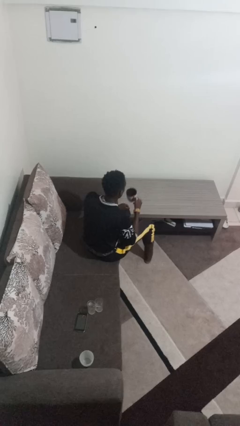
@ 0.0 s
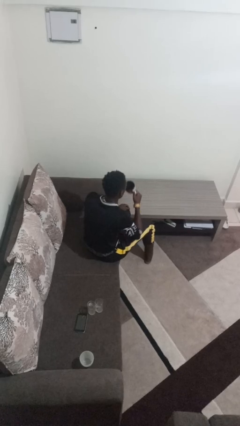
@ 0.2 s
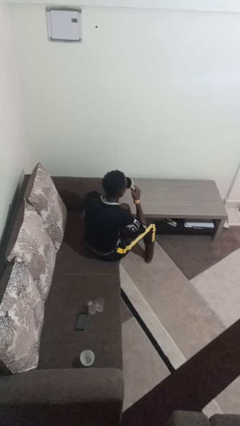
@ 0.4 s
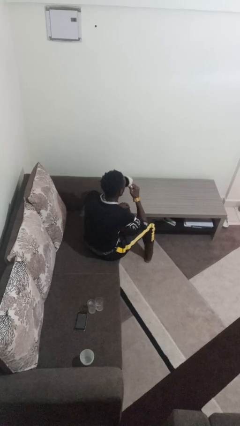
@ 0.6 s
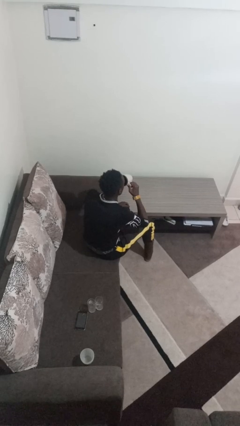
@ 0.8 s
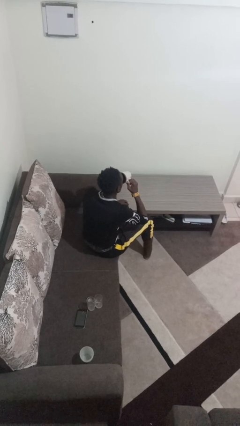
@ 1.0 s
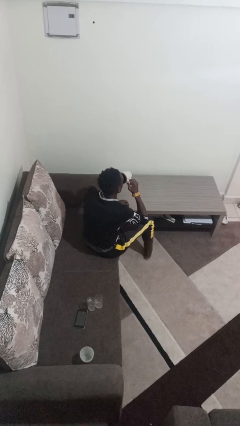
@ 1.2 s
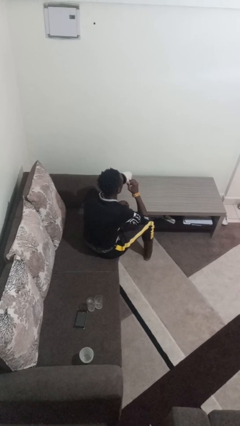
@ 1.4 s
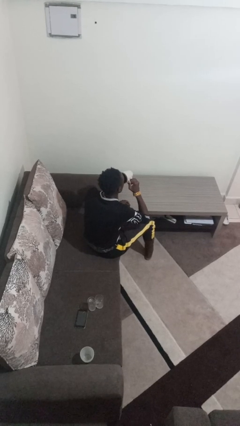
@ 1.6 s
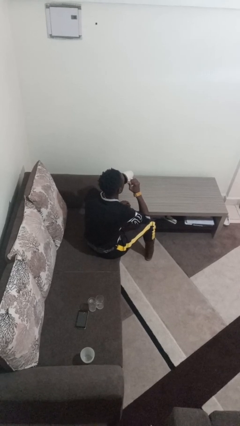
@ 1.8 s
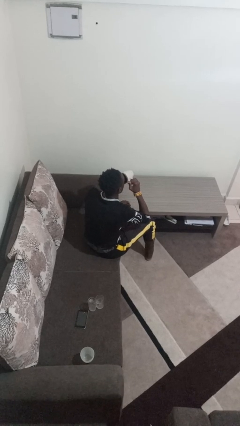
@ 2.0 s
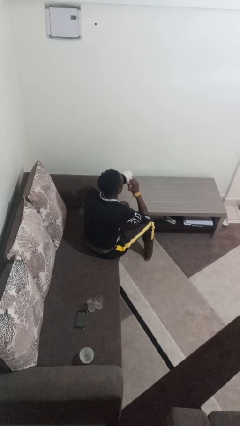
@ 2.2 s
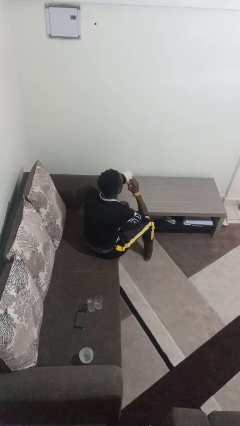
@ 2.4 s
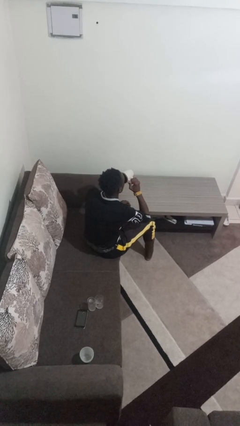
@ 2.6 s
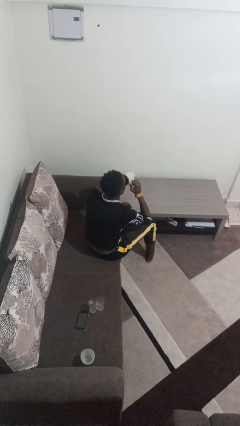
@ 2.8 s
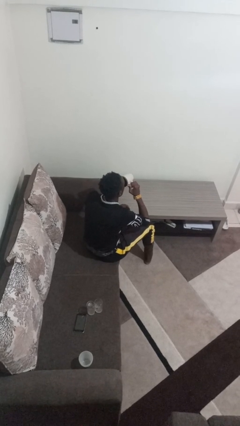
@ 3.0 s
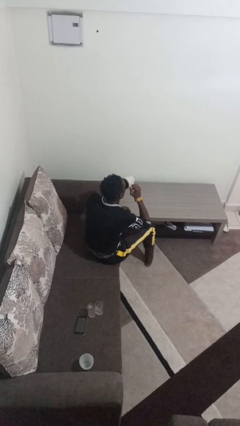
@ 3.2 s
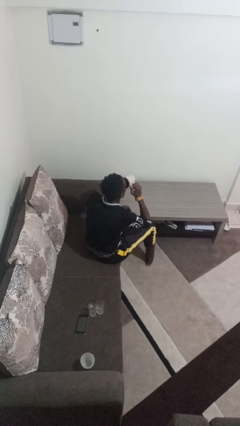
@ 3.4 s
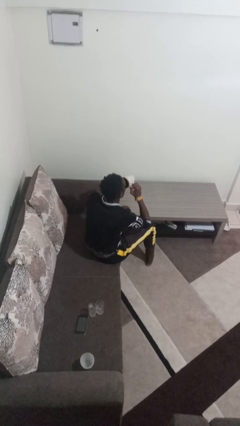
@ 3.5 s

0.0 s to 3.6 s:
person drinks from mug

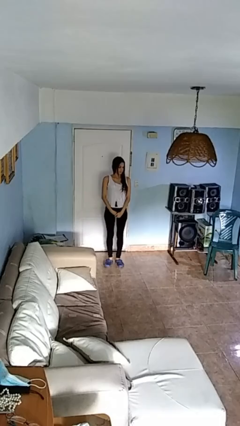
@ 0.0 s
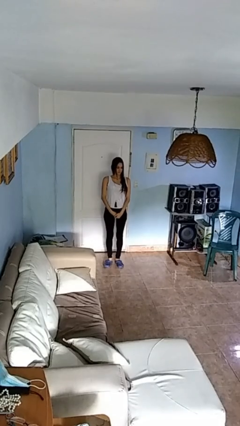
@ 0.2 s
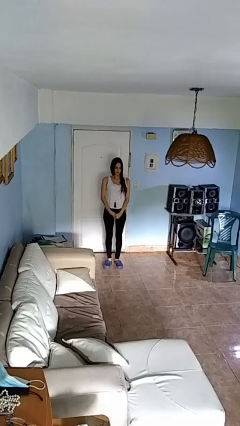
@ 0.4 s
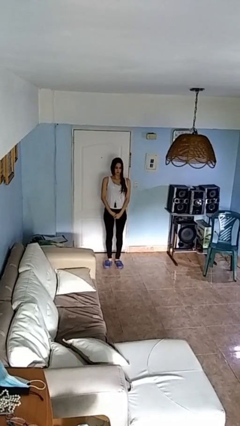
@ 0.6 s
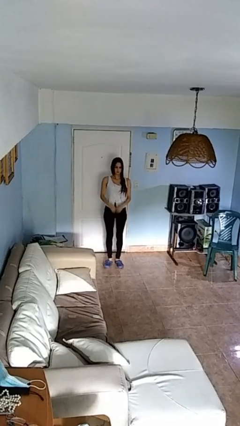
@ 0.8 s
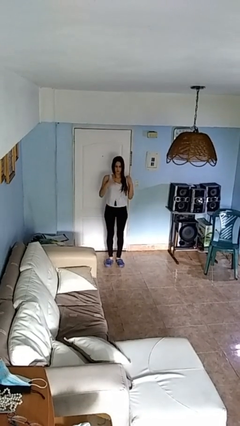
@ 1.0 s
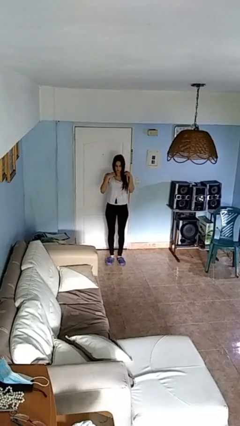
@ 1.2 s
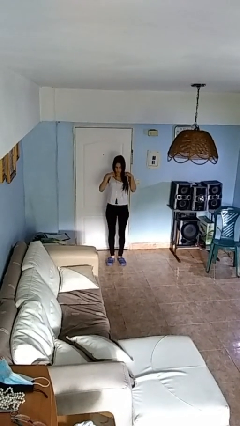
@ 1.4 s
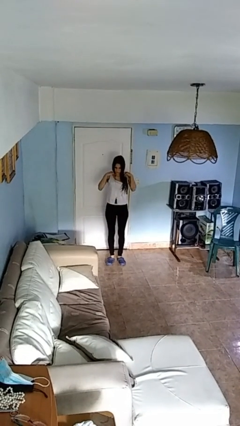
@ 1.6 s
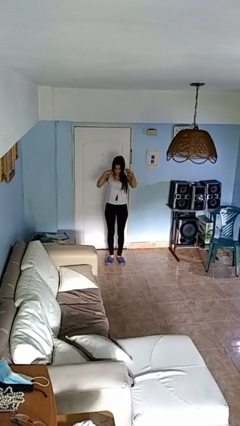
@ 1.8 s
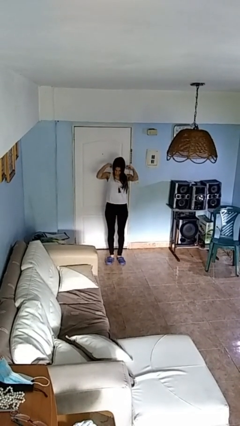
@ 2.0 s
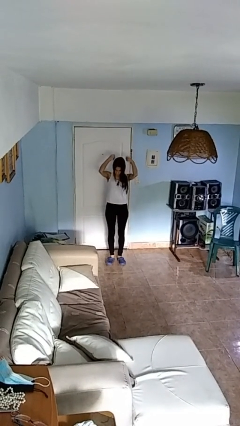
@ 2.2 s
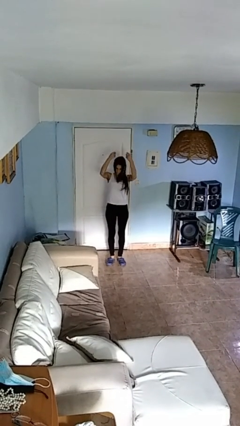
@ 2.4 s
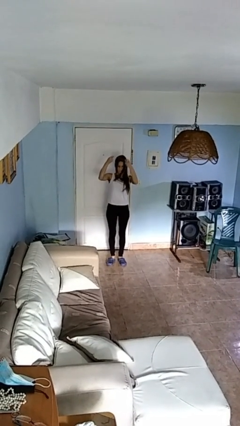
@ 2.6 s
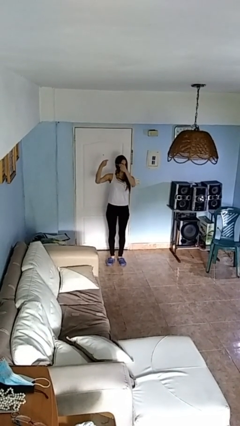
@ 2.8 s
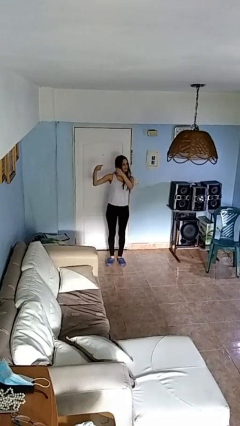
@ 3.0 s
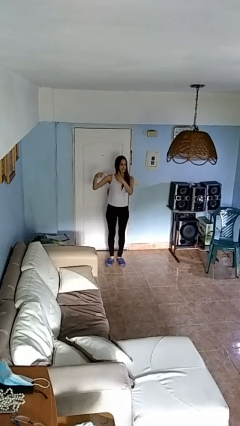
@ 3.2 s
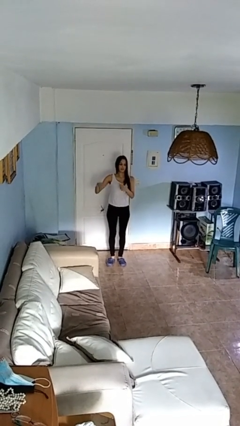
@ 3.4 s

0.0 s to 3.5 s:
person takes off necklace

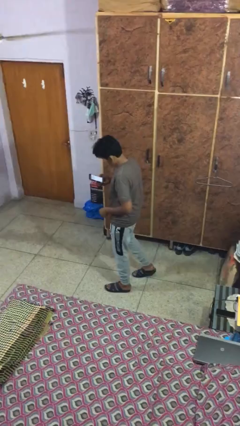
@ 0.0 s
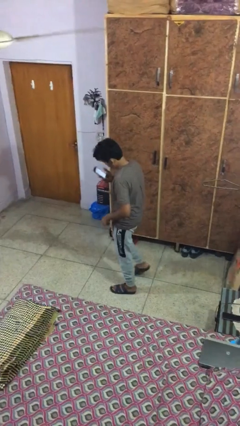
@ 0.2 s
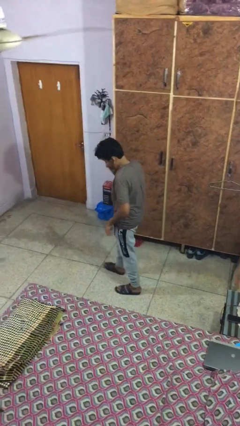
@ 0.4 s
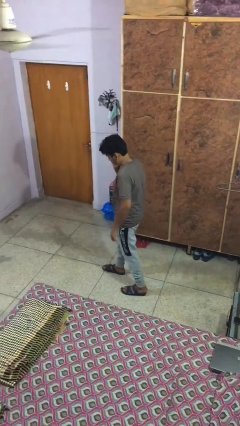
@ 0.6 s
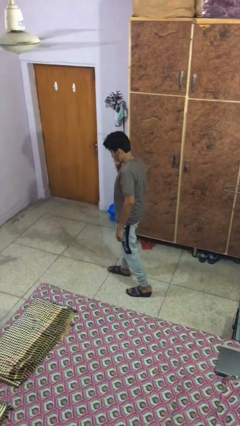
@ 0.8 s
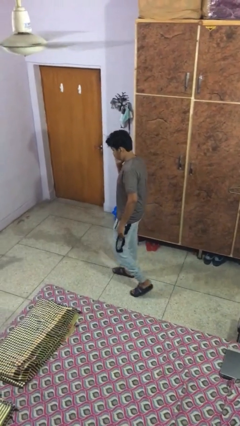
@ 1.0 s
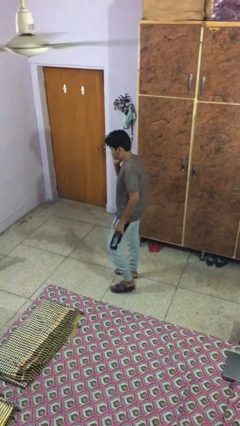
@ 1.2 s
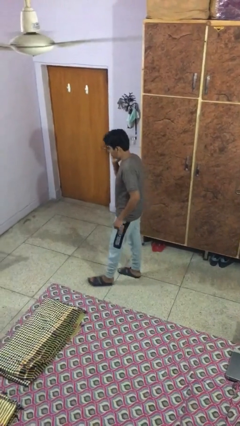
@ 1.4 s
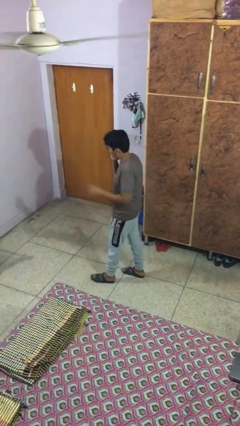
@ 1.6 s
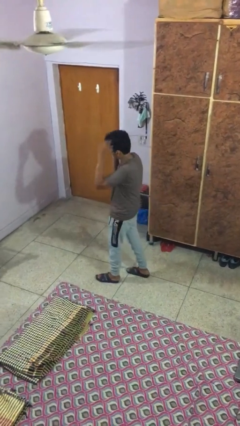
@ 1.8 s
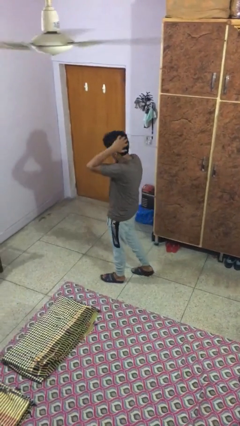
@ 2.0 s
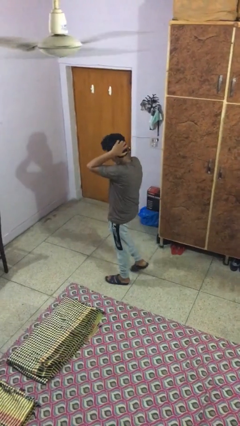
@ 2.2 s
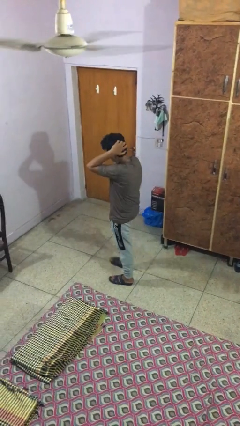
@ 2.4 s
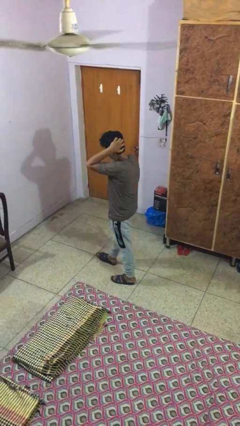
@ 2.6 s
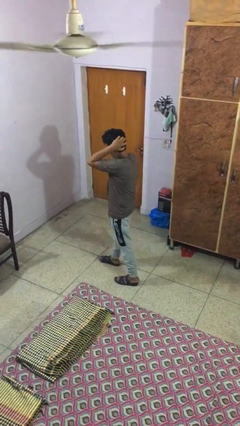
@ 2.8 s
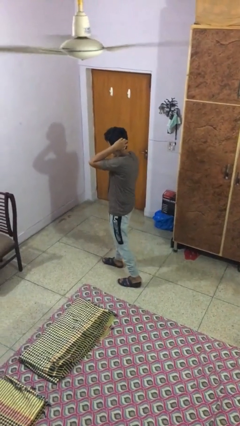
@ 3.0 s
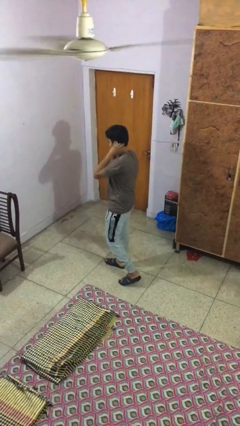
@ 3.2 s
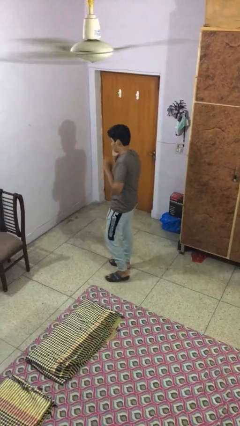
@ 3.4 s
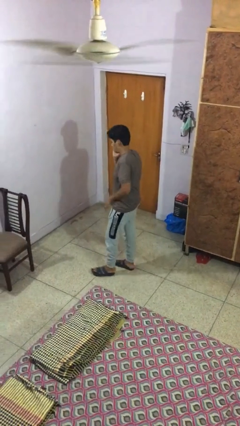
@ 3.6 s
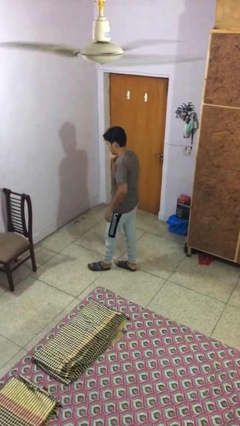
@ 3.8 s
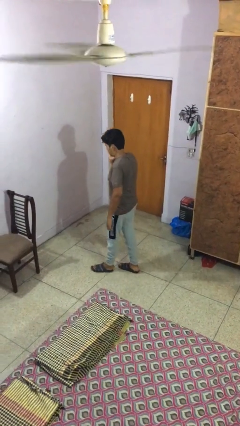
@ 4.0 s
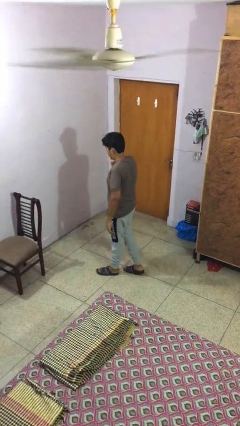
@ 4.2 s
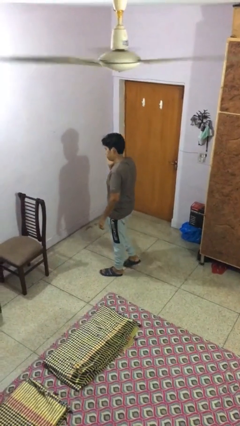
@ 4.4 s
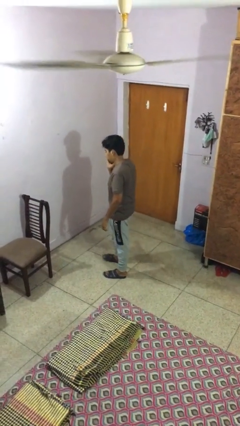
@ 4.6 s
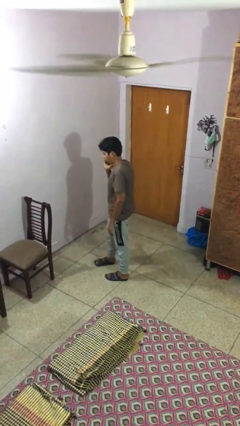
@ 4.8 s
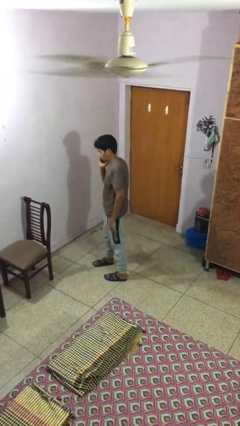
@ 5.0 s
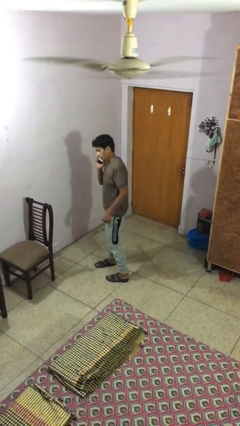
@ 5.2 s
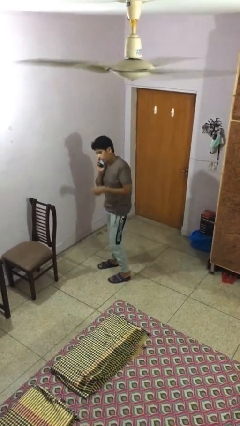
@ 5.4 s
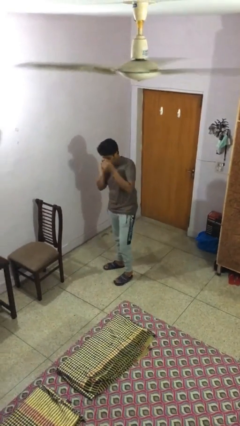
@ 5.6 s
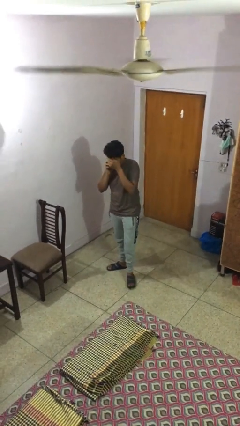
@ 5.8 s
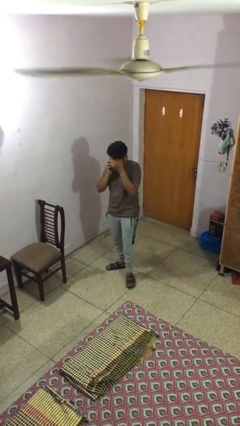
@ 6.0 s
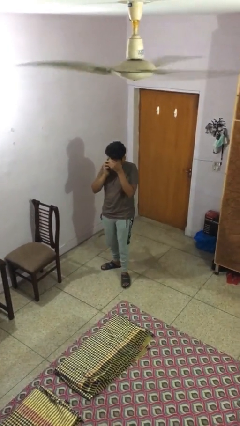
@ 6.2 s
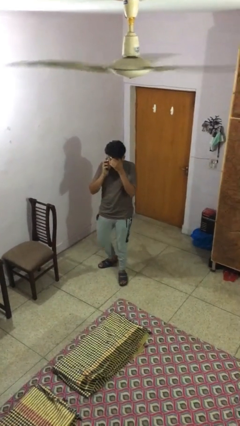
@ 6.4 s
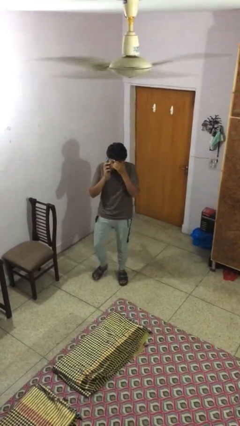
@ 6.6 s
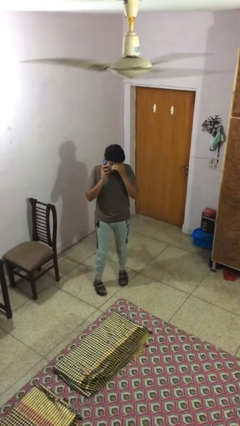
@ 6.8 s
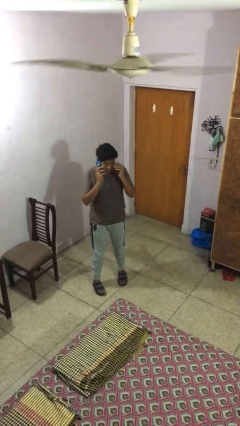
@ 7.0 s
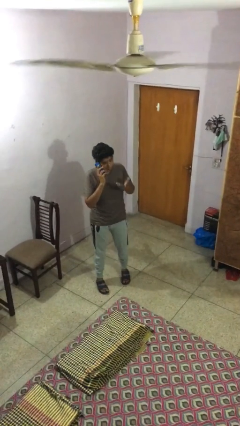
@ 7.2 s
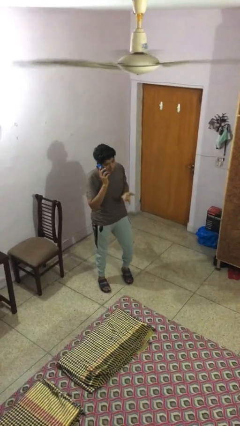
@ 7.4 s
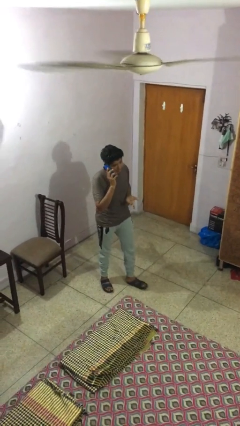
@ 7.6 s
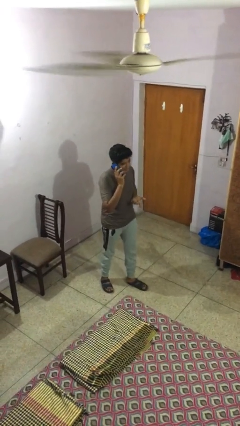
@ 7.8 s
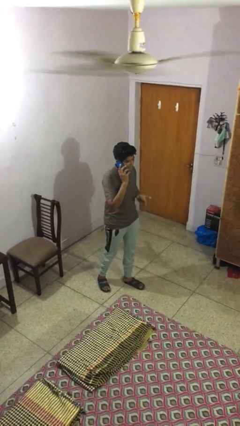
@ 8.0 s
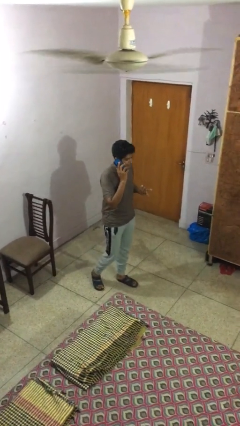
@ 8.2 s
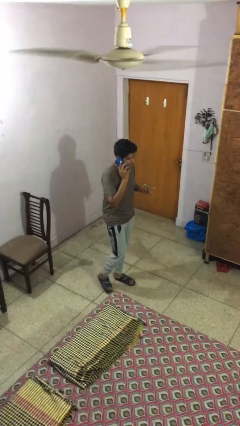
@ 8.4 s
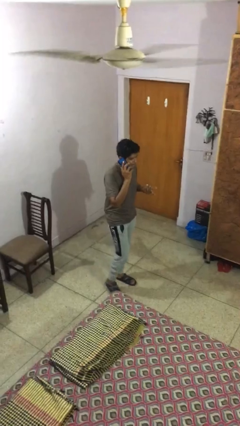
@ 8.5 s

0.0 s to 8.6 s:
person talks on phone

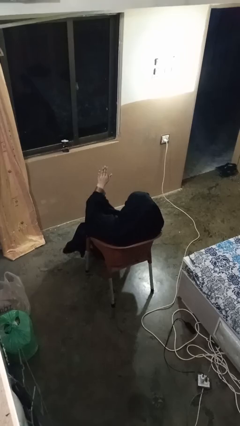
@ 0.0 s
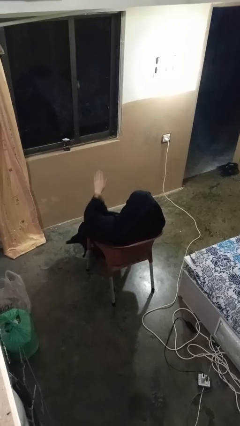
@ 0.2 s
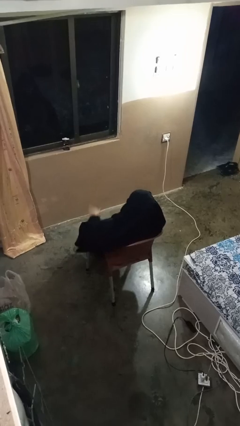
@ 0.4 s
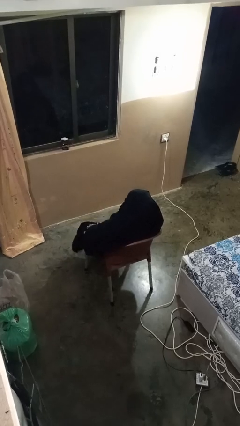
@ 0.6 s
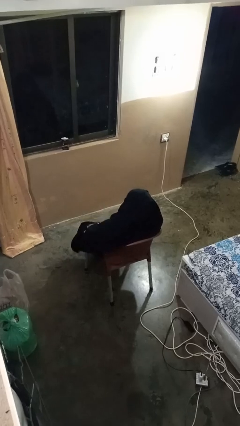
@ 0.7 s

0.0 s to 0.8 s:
person gestures lower hand

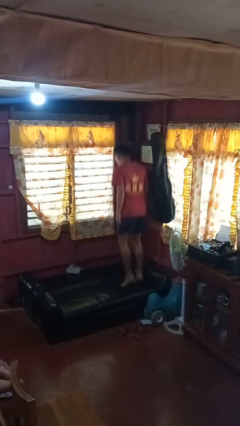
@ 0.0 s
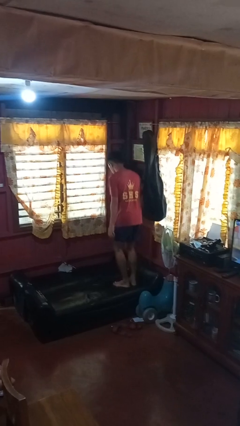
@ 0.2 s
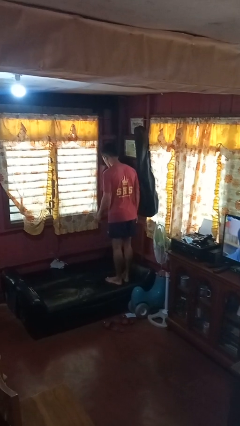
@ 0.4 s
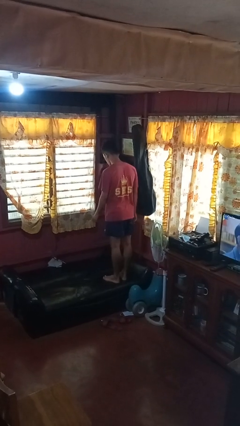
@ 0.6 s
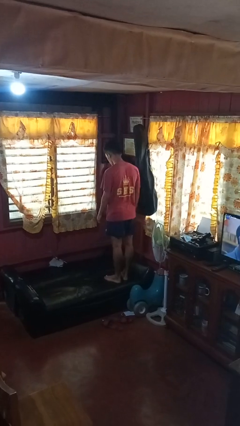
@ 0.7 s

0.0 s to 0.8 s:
person jumps on couch
